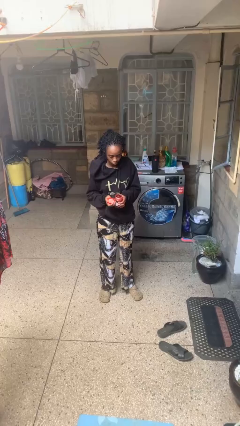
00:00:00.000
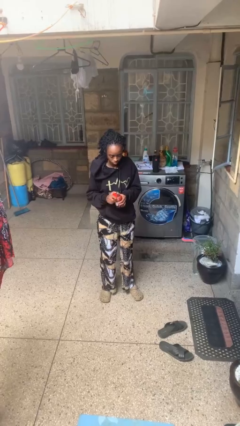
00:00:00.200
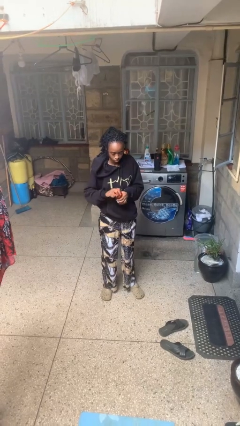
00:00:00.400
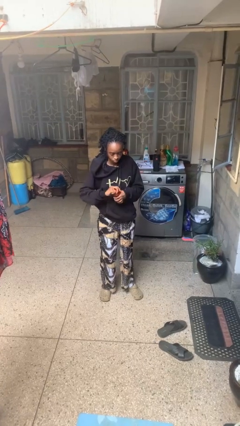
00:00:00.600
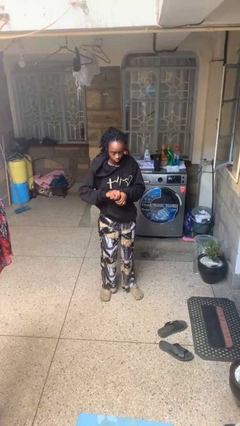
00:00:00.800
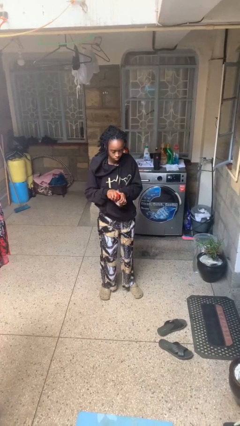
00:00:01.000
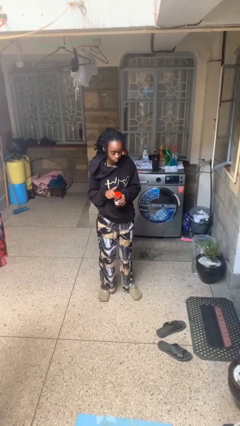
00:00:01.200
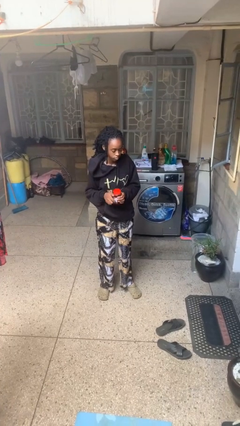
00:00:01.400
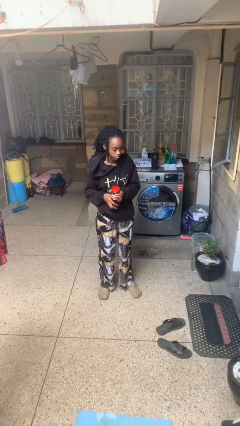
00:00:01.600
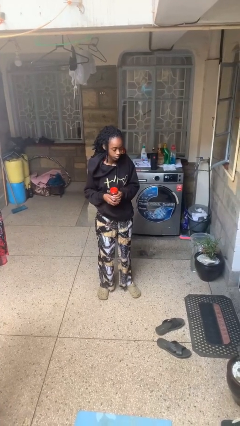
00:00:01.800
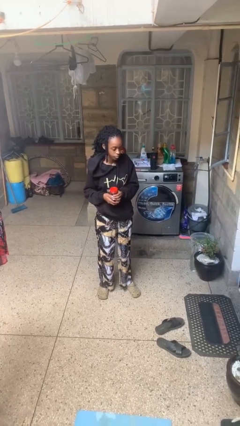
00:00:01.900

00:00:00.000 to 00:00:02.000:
person closes jar

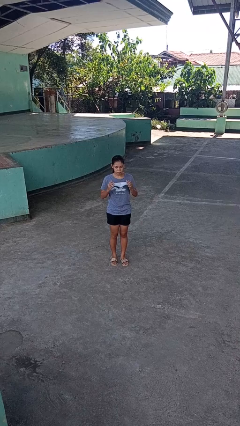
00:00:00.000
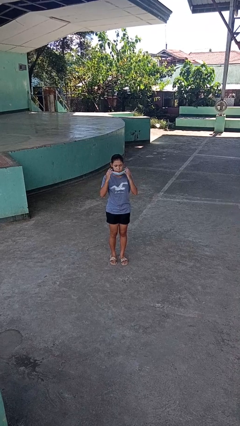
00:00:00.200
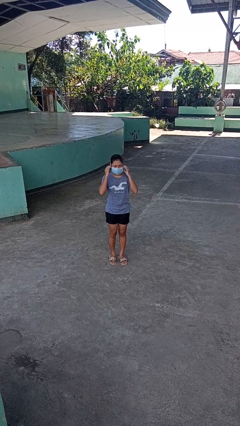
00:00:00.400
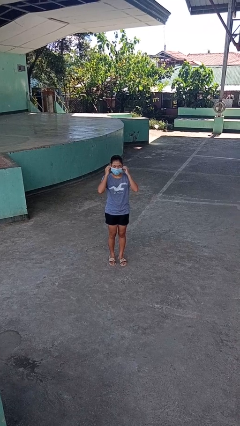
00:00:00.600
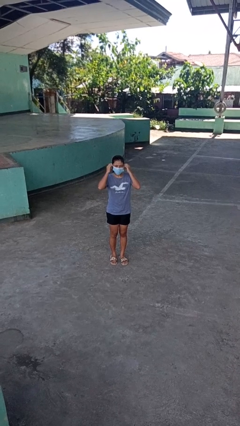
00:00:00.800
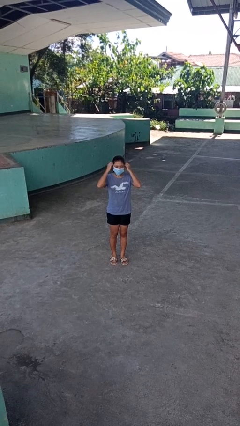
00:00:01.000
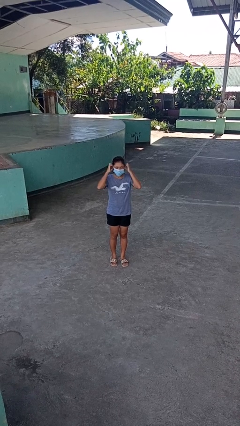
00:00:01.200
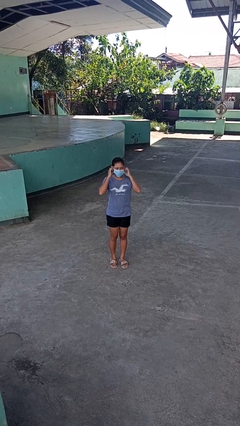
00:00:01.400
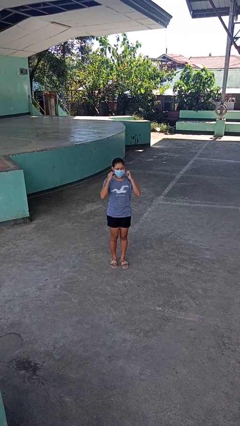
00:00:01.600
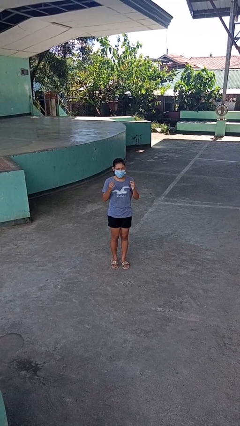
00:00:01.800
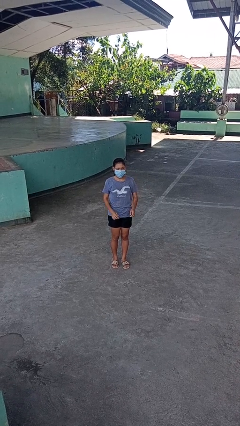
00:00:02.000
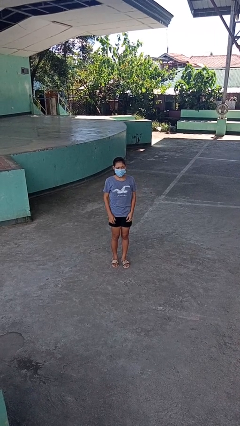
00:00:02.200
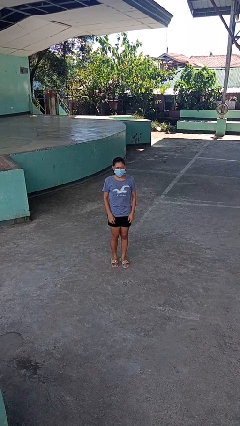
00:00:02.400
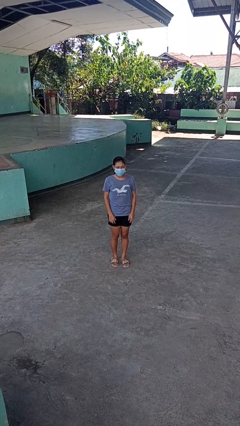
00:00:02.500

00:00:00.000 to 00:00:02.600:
person puts on facemask

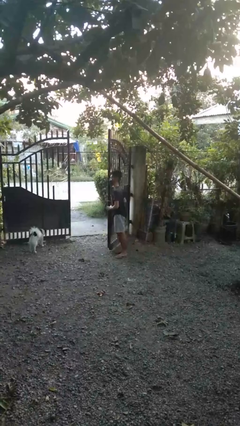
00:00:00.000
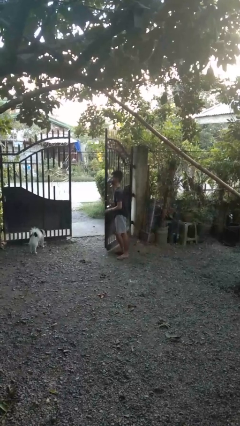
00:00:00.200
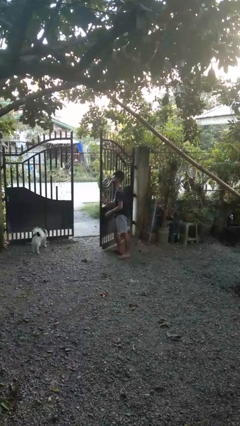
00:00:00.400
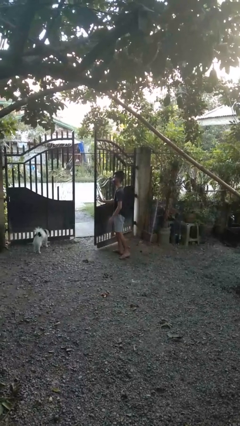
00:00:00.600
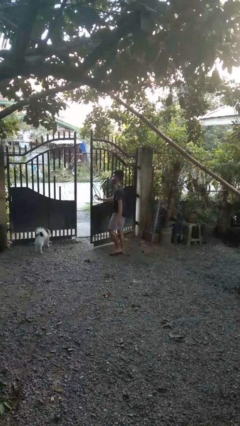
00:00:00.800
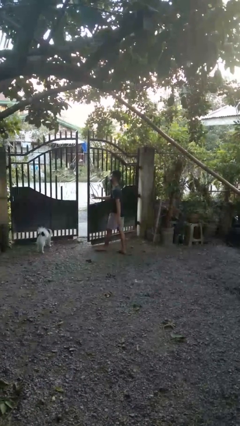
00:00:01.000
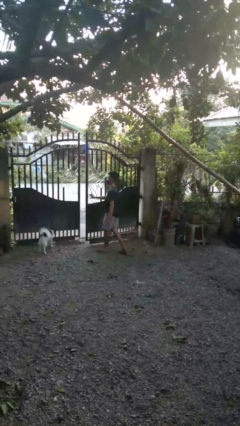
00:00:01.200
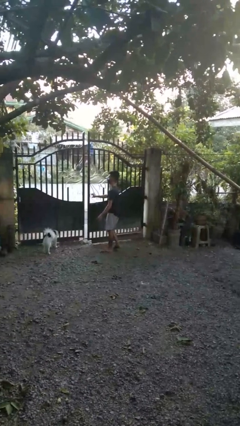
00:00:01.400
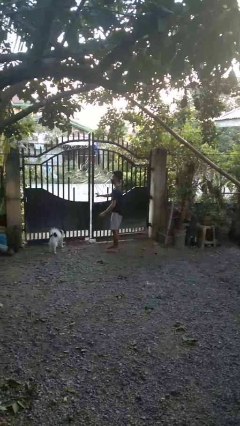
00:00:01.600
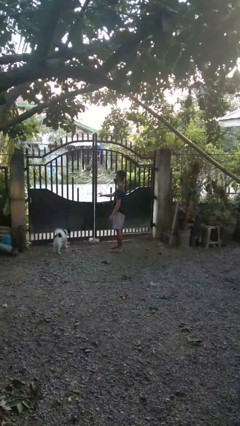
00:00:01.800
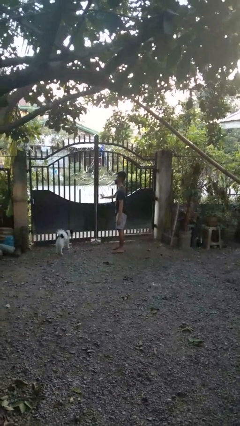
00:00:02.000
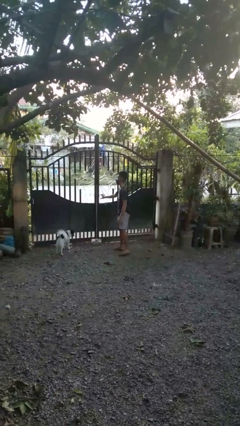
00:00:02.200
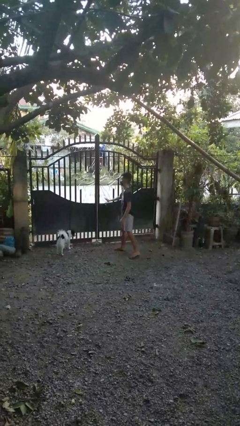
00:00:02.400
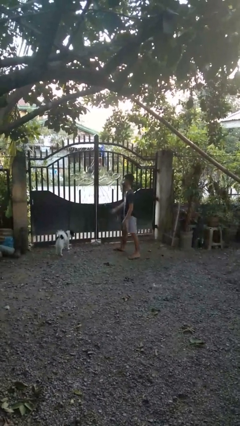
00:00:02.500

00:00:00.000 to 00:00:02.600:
person closes gate

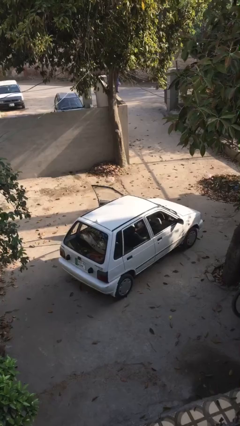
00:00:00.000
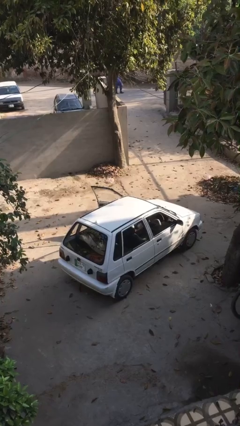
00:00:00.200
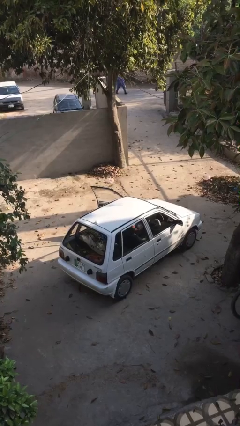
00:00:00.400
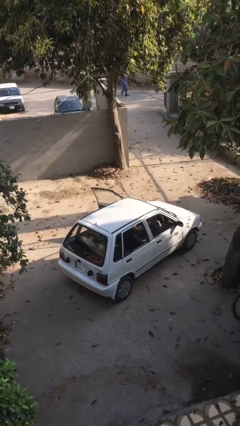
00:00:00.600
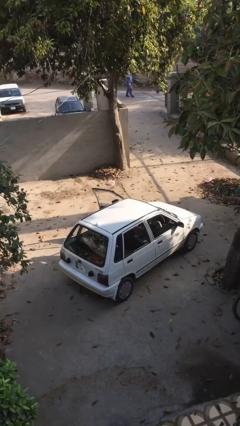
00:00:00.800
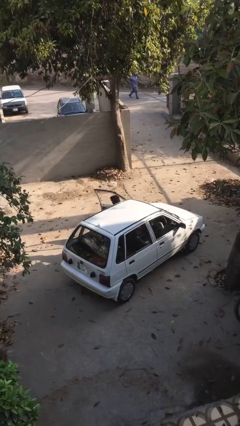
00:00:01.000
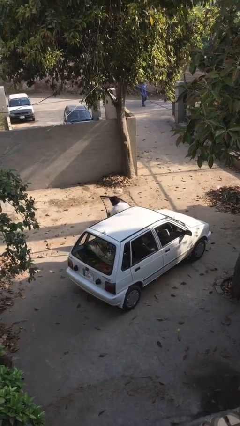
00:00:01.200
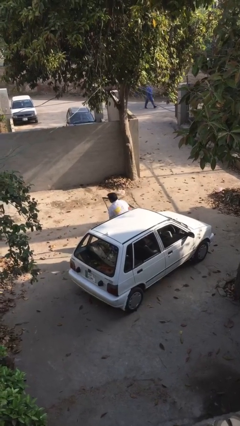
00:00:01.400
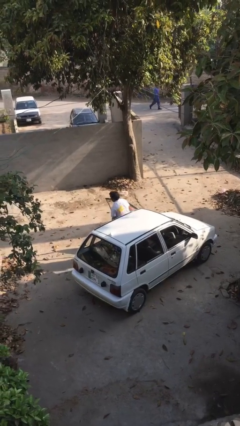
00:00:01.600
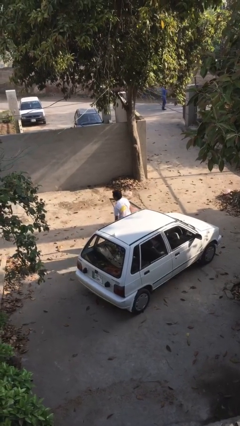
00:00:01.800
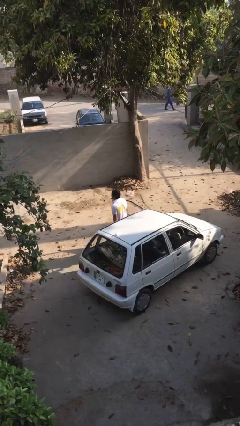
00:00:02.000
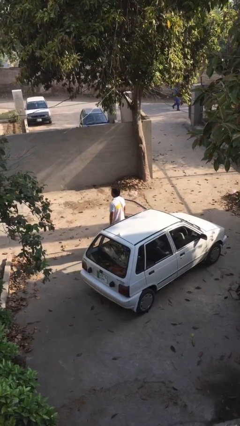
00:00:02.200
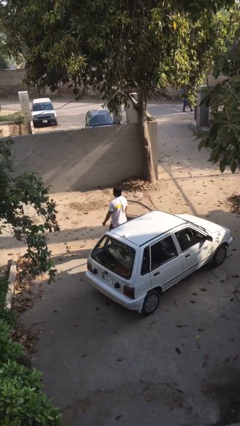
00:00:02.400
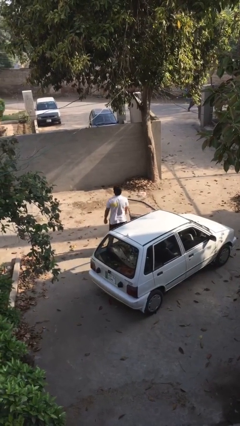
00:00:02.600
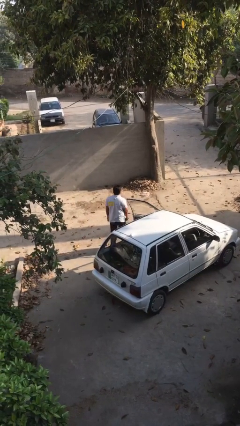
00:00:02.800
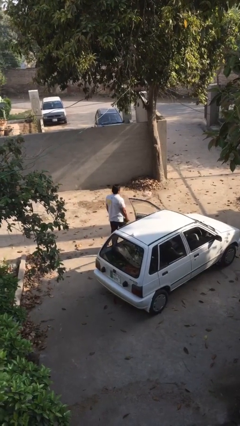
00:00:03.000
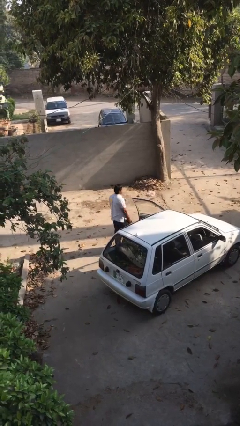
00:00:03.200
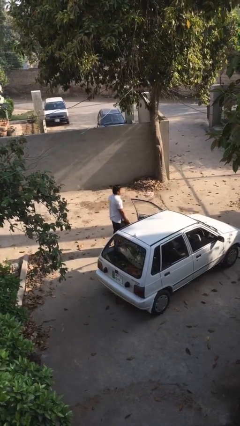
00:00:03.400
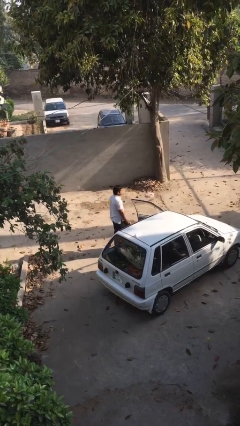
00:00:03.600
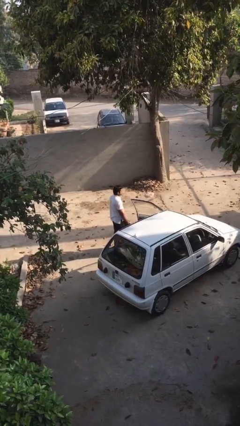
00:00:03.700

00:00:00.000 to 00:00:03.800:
person exits car

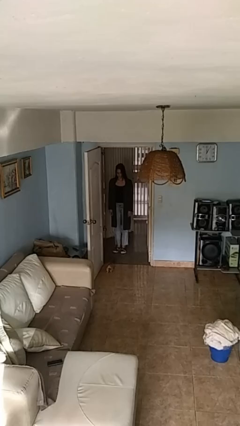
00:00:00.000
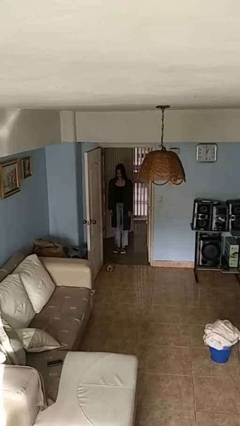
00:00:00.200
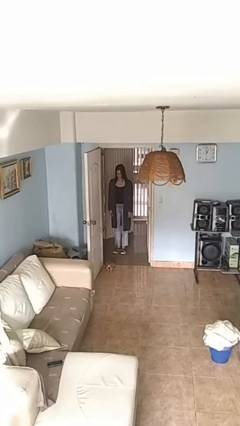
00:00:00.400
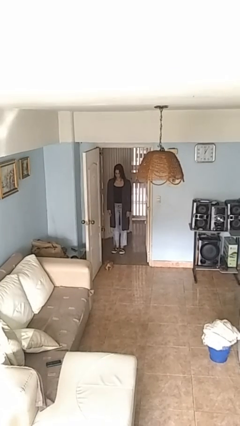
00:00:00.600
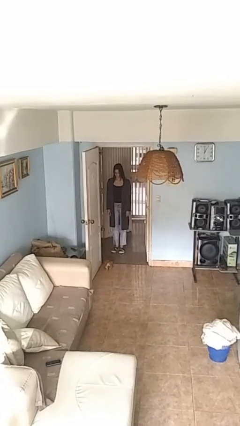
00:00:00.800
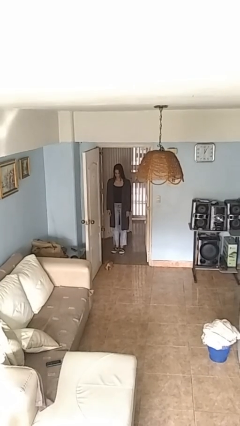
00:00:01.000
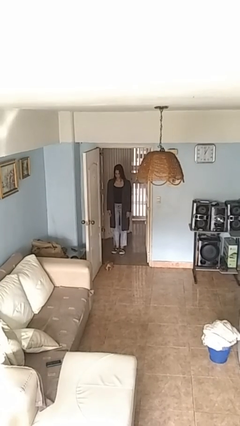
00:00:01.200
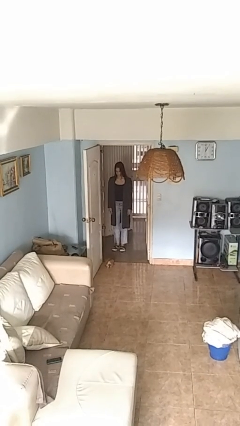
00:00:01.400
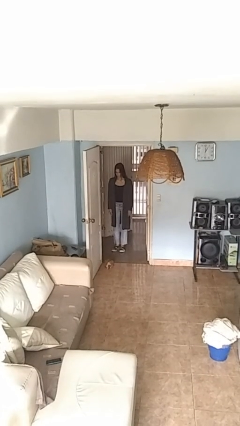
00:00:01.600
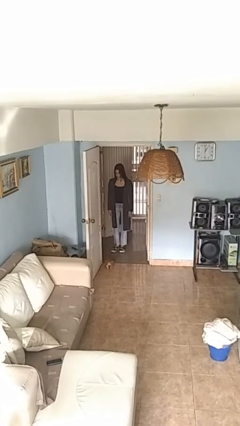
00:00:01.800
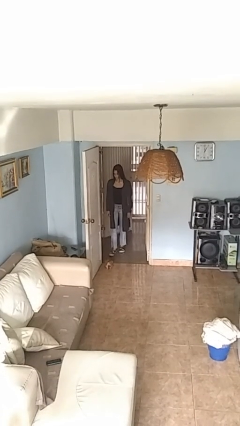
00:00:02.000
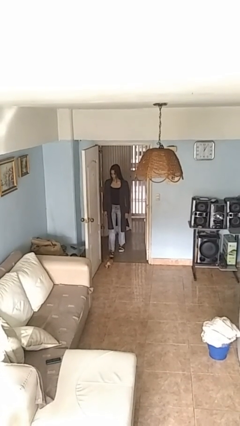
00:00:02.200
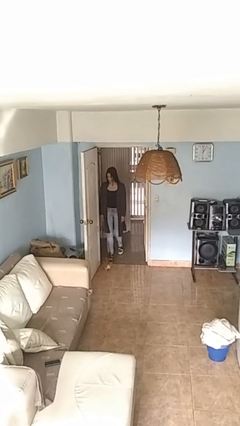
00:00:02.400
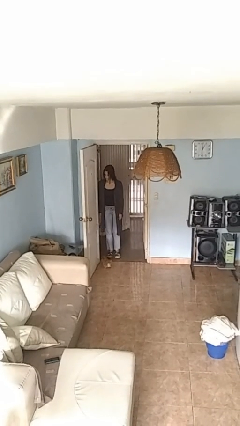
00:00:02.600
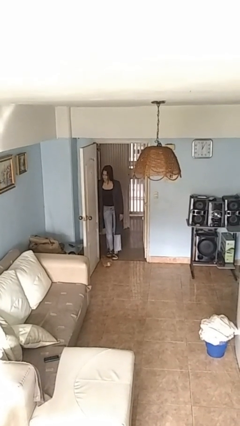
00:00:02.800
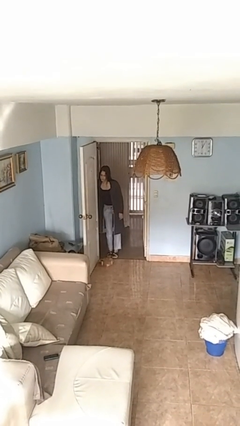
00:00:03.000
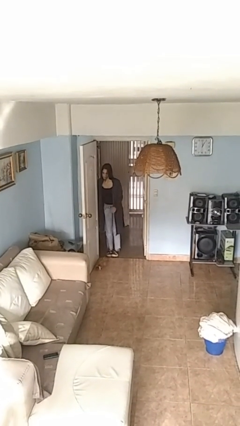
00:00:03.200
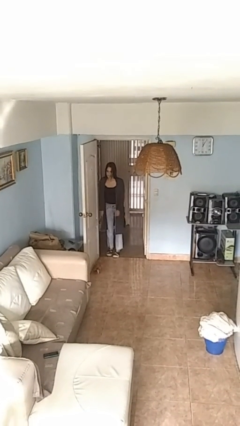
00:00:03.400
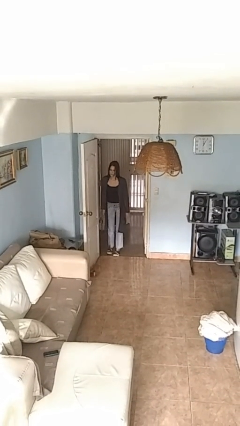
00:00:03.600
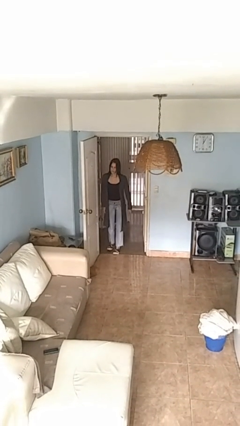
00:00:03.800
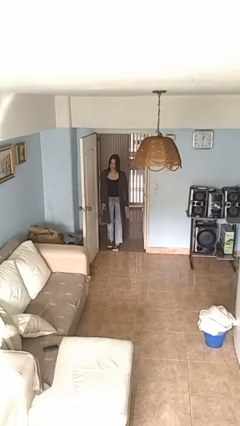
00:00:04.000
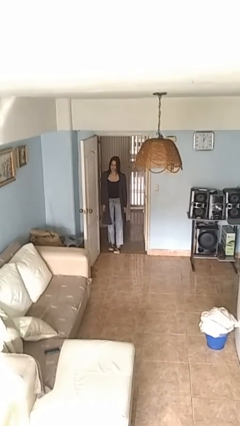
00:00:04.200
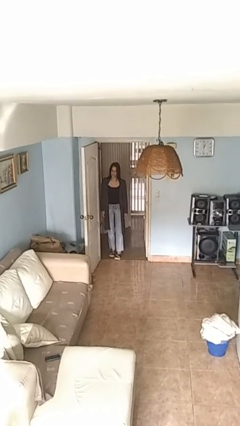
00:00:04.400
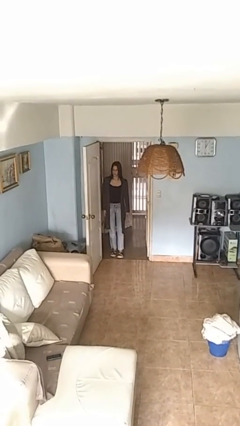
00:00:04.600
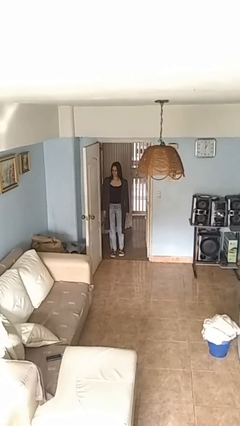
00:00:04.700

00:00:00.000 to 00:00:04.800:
person bumps into wall

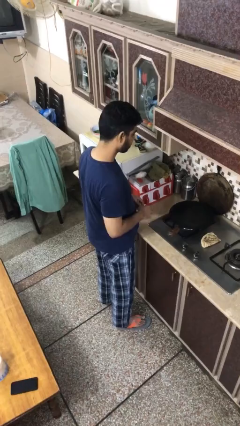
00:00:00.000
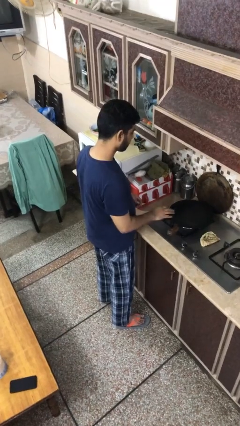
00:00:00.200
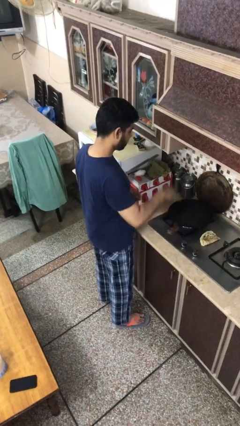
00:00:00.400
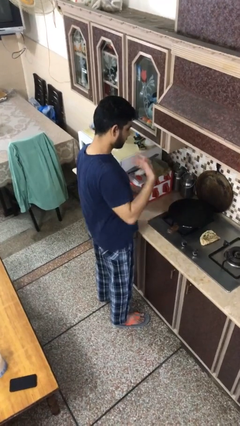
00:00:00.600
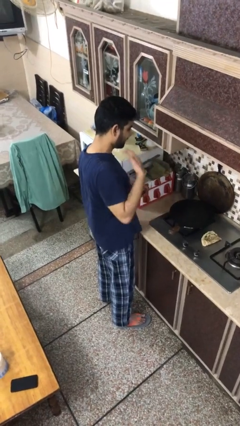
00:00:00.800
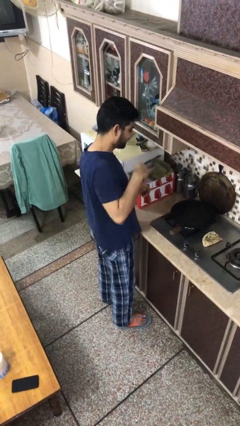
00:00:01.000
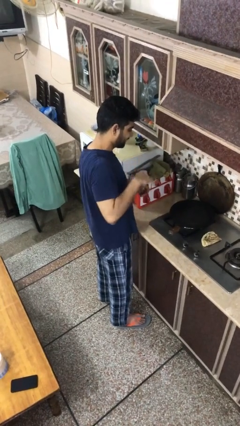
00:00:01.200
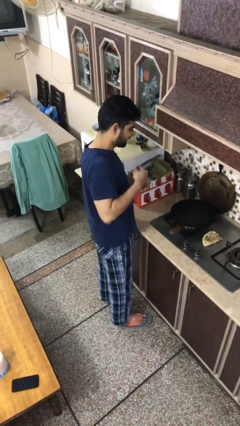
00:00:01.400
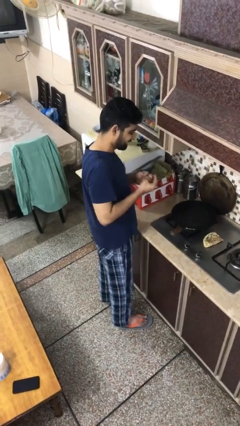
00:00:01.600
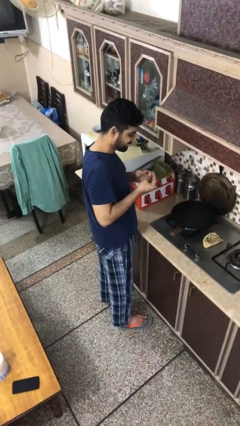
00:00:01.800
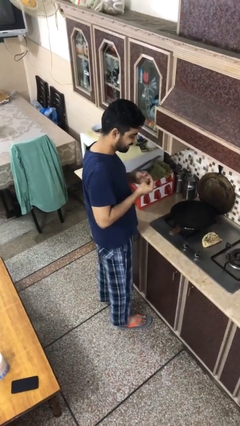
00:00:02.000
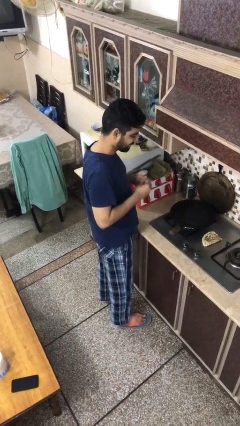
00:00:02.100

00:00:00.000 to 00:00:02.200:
person burns hand
